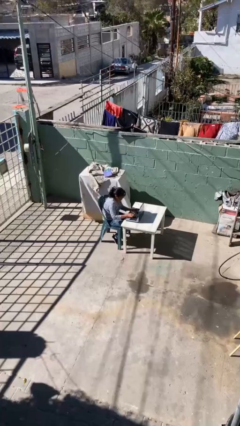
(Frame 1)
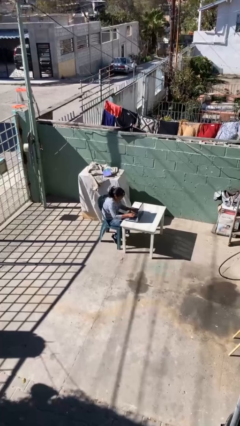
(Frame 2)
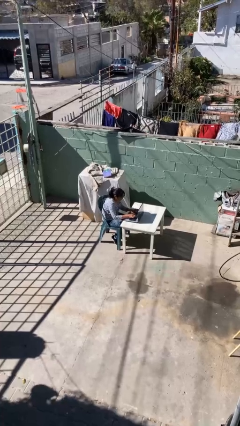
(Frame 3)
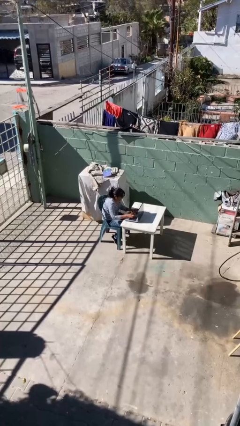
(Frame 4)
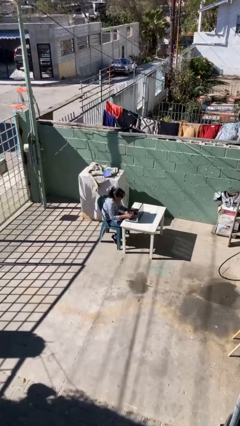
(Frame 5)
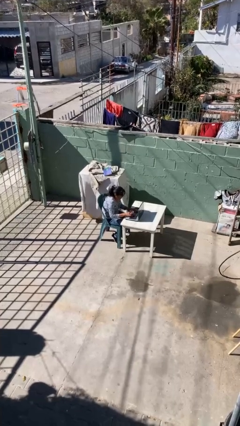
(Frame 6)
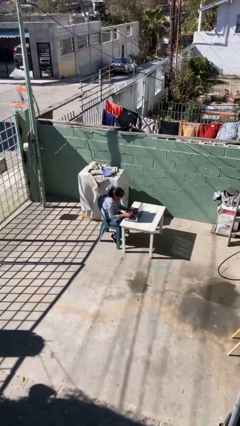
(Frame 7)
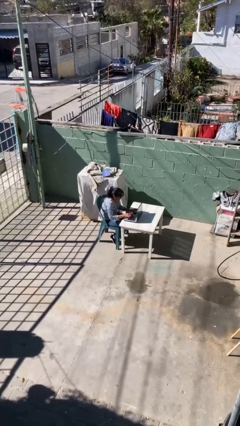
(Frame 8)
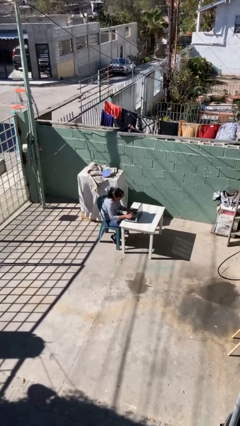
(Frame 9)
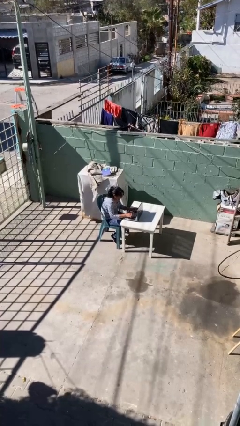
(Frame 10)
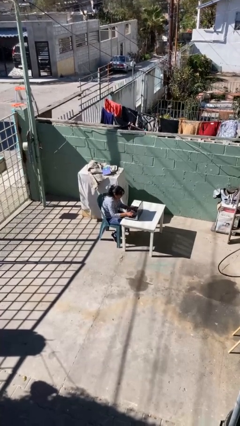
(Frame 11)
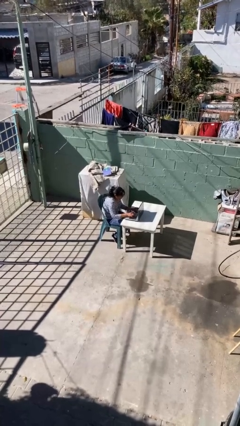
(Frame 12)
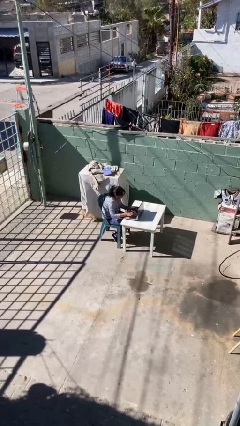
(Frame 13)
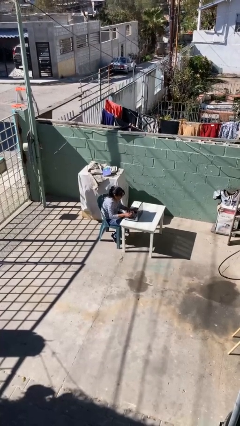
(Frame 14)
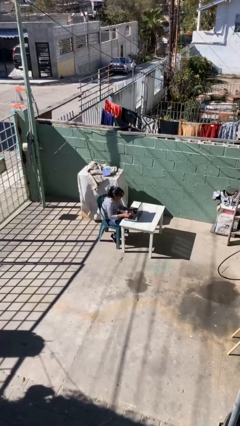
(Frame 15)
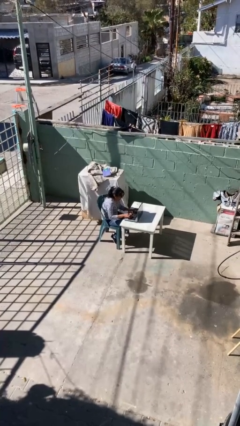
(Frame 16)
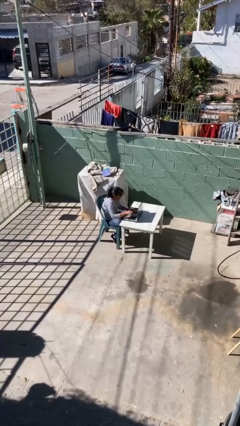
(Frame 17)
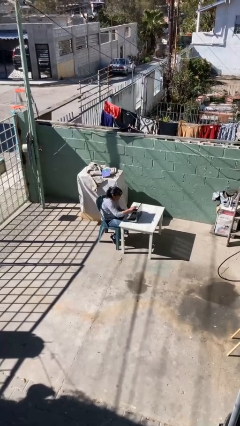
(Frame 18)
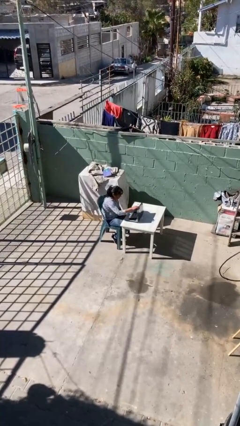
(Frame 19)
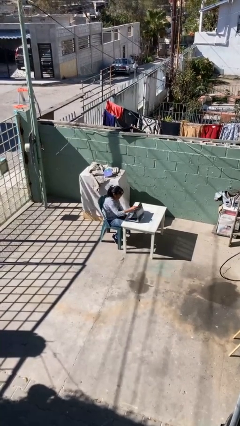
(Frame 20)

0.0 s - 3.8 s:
person interacts with laptop

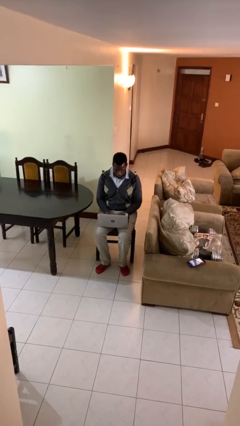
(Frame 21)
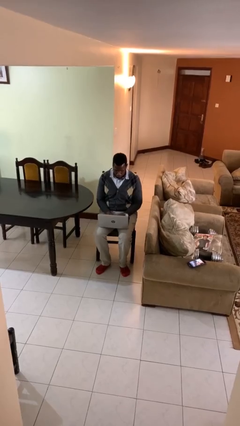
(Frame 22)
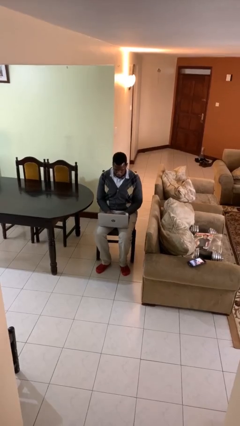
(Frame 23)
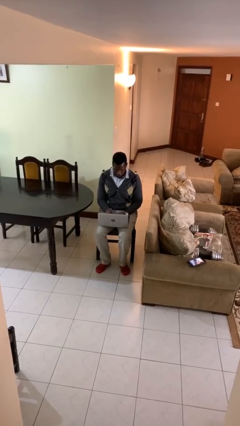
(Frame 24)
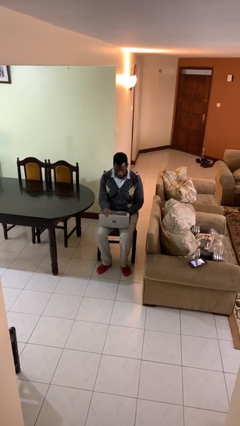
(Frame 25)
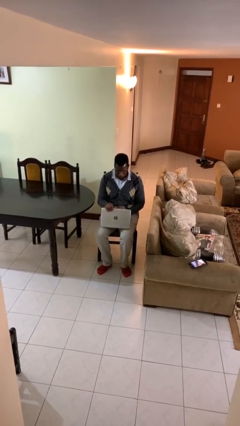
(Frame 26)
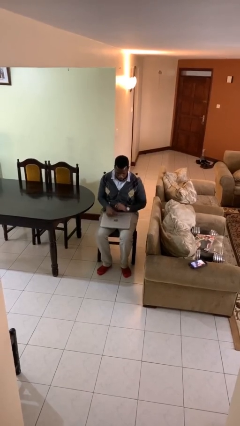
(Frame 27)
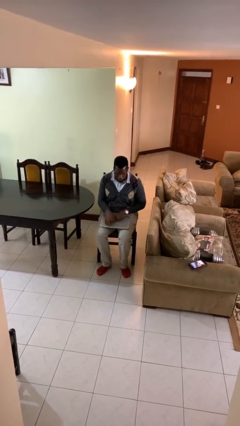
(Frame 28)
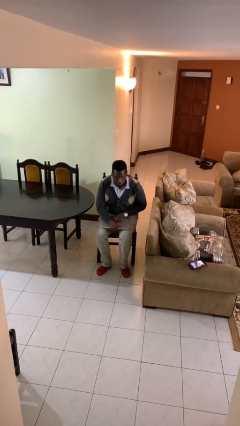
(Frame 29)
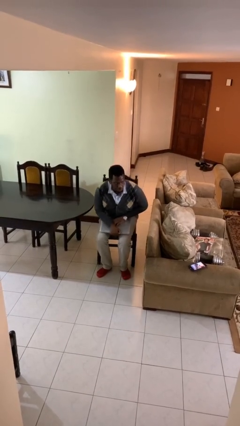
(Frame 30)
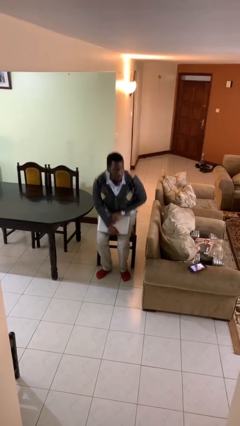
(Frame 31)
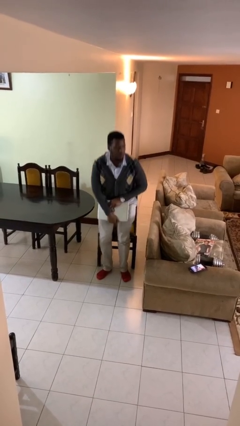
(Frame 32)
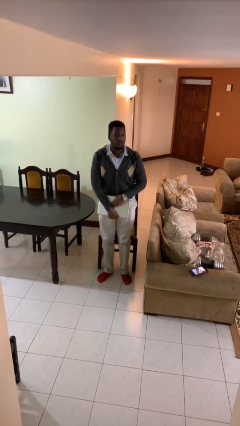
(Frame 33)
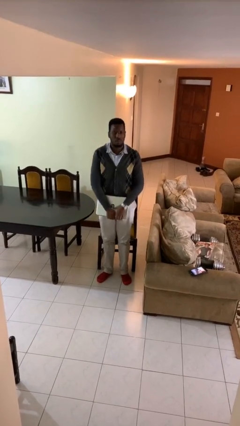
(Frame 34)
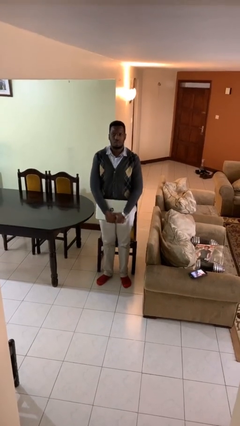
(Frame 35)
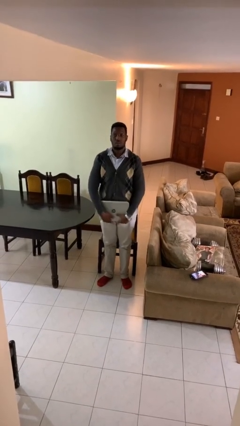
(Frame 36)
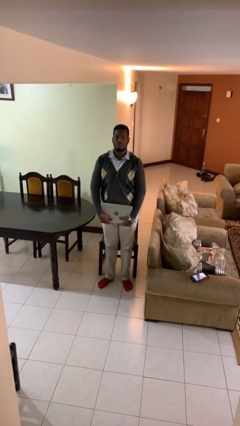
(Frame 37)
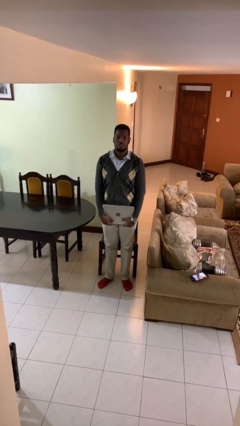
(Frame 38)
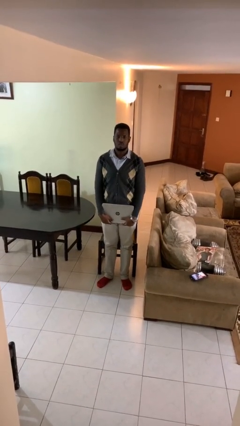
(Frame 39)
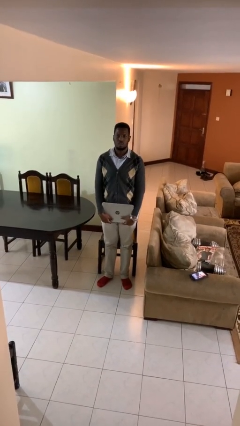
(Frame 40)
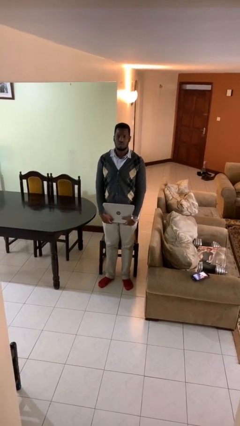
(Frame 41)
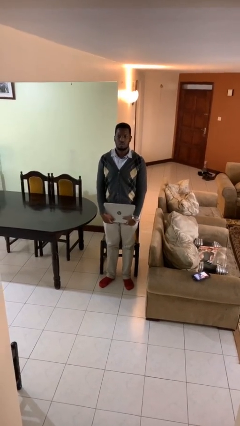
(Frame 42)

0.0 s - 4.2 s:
person stands up

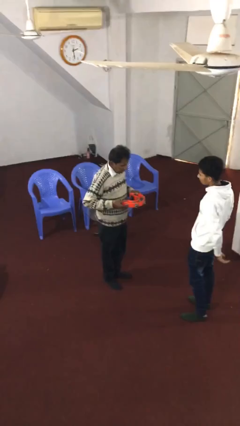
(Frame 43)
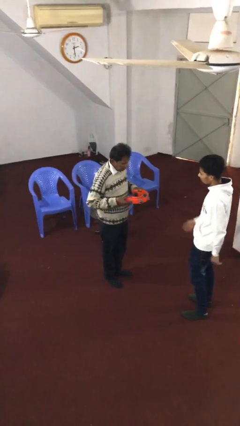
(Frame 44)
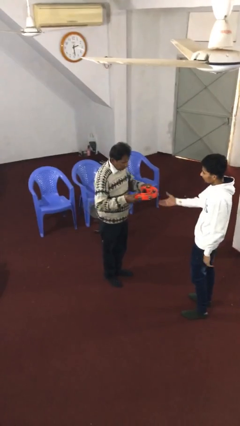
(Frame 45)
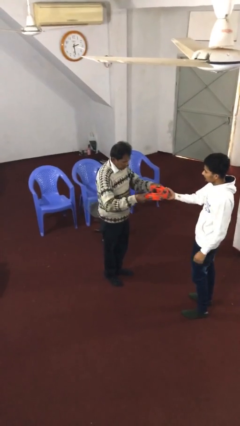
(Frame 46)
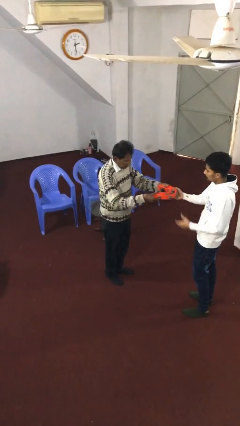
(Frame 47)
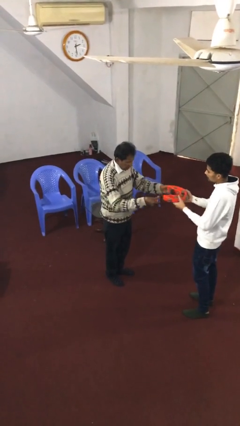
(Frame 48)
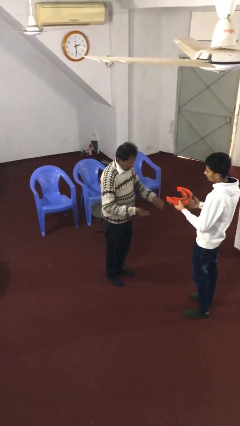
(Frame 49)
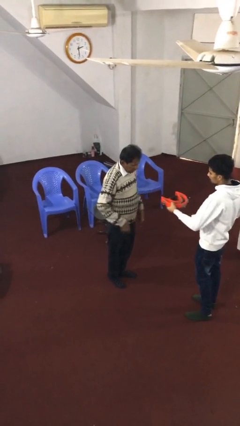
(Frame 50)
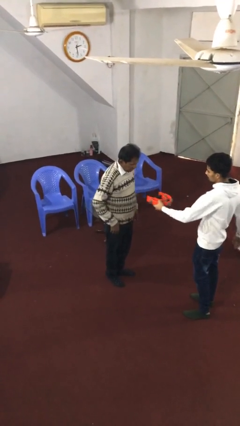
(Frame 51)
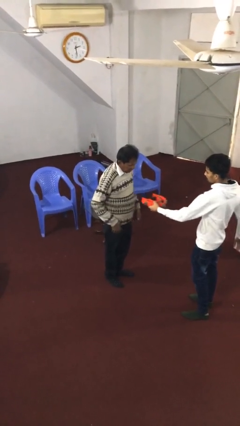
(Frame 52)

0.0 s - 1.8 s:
person transfers object to person

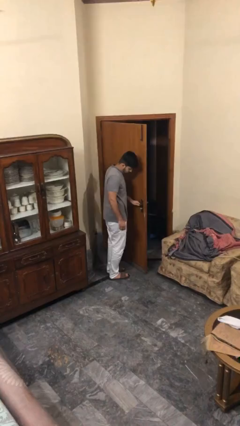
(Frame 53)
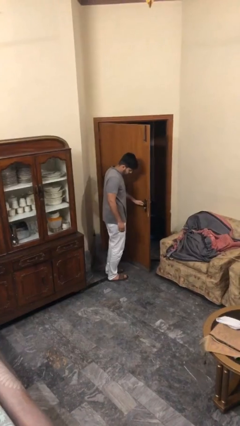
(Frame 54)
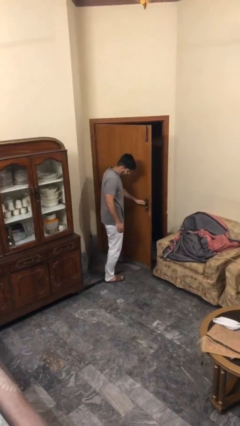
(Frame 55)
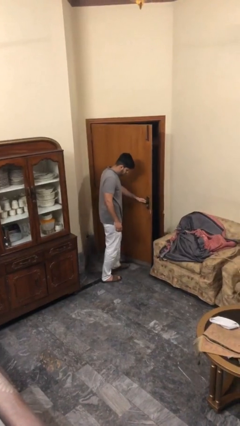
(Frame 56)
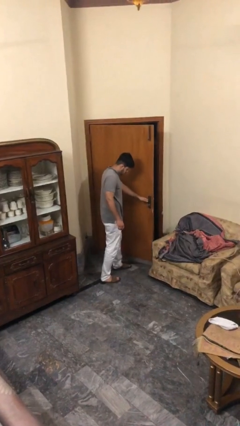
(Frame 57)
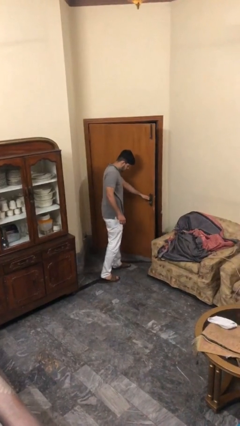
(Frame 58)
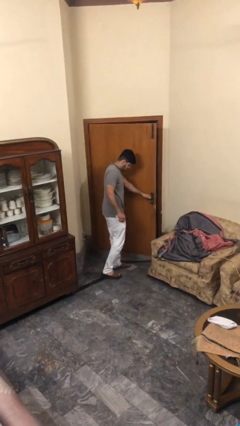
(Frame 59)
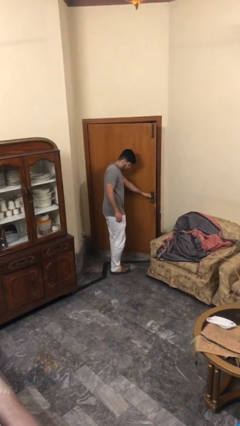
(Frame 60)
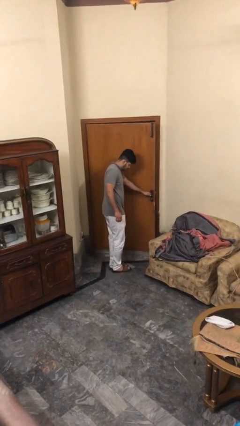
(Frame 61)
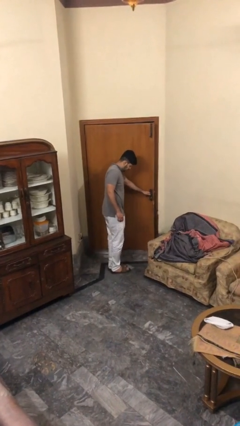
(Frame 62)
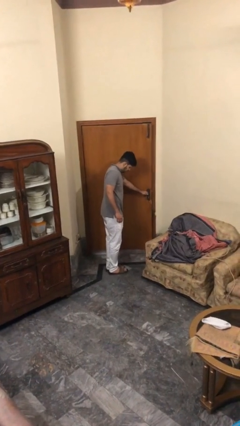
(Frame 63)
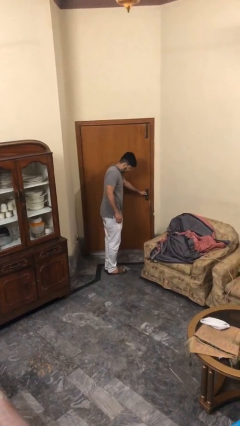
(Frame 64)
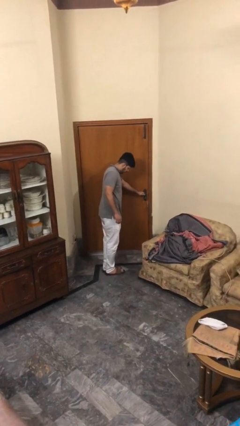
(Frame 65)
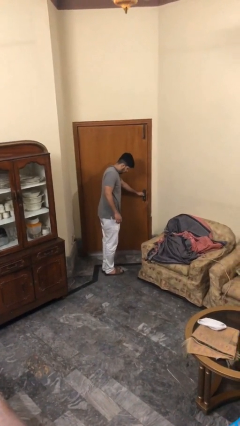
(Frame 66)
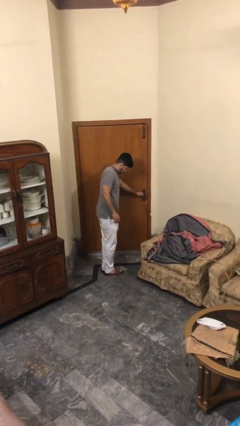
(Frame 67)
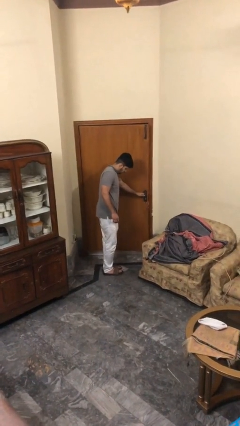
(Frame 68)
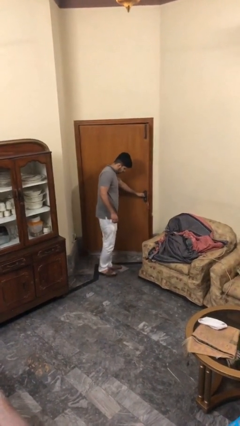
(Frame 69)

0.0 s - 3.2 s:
person closes facility door

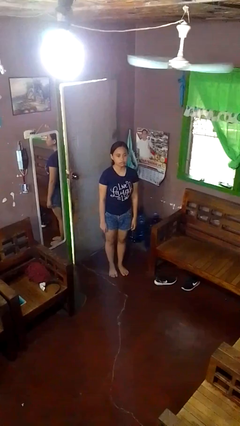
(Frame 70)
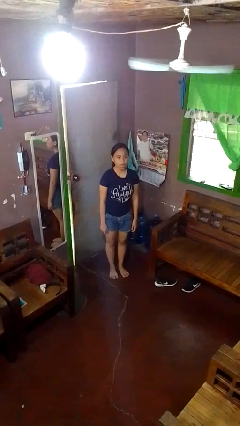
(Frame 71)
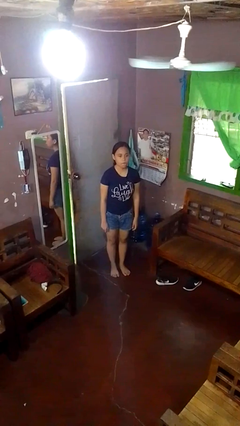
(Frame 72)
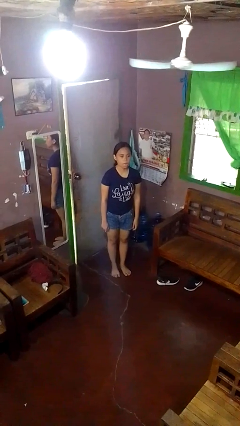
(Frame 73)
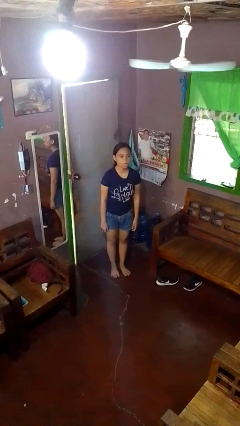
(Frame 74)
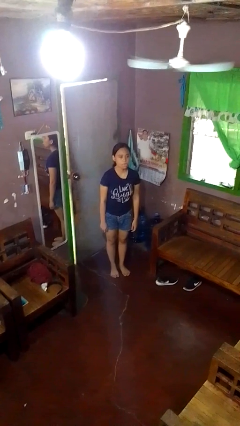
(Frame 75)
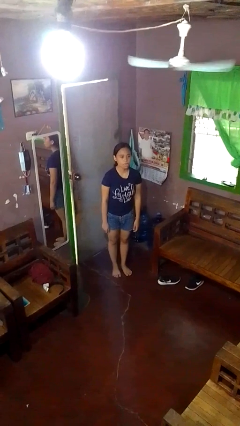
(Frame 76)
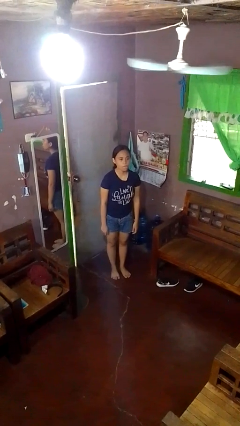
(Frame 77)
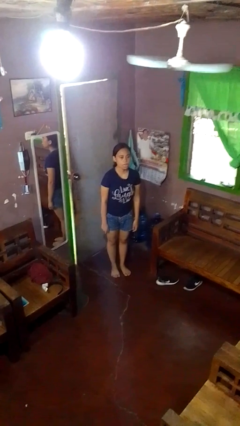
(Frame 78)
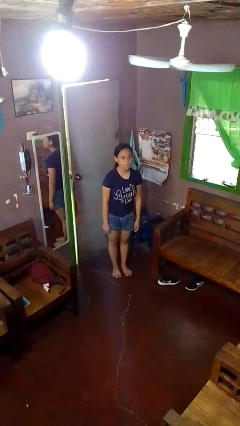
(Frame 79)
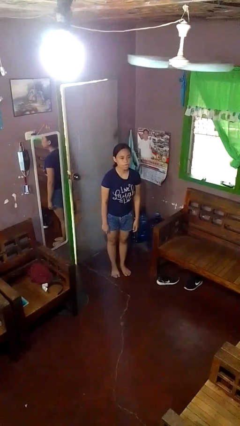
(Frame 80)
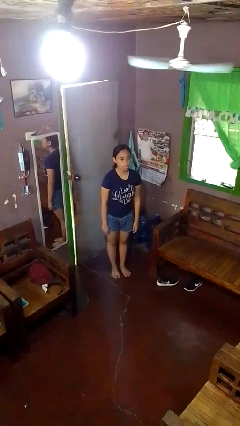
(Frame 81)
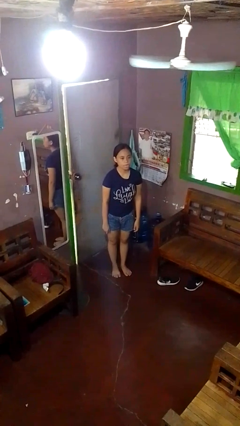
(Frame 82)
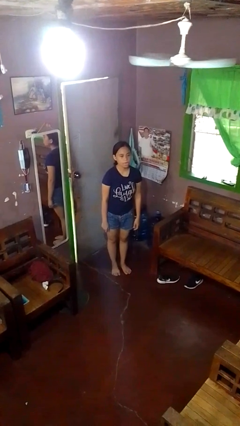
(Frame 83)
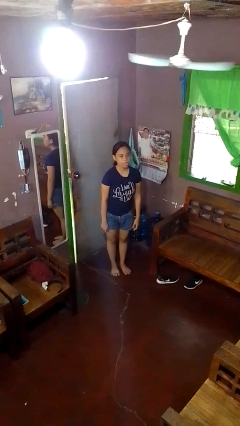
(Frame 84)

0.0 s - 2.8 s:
person sticks out tongue

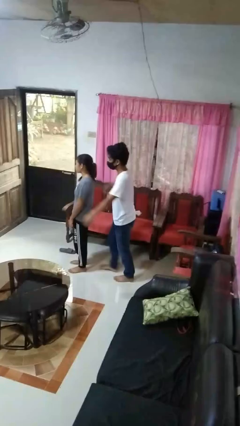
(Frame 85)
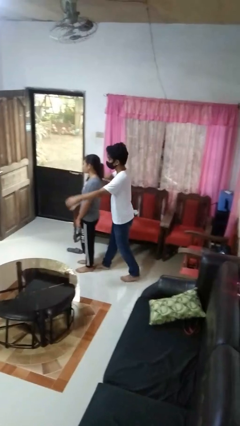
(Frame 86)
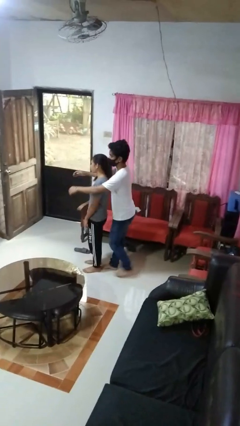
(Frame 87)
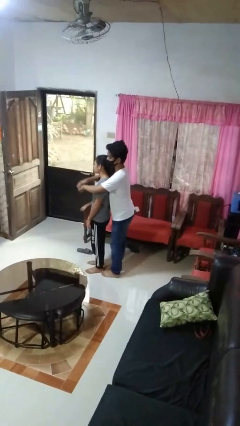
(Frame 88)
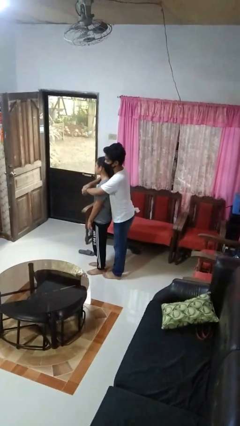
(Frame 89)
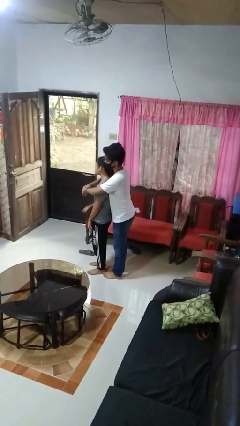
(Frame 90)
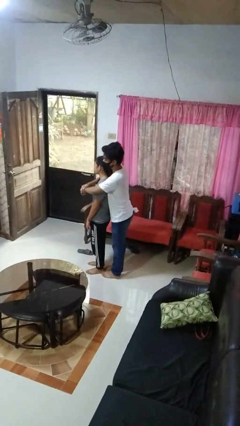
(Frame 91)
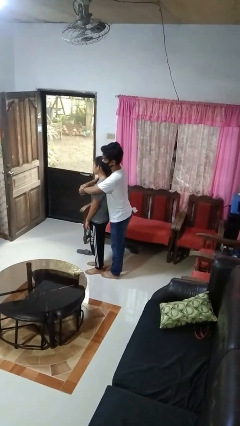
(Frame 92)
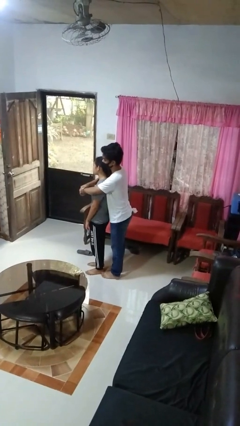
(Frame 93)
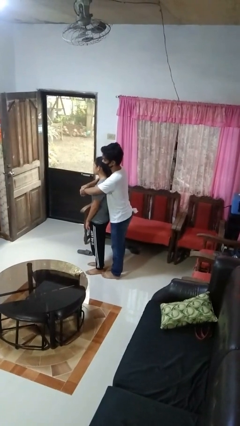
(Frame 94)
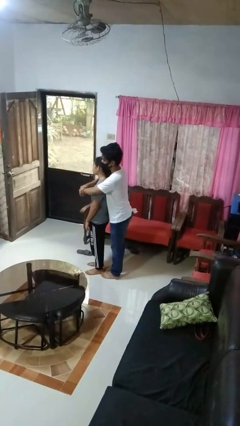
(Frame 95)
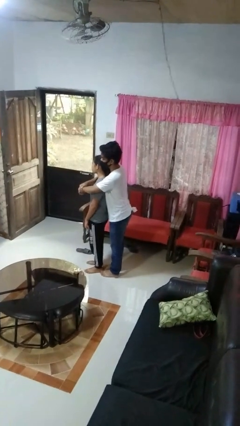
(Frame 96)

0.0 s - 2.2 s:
person hugs person from behind
